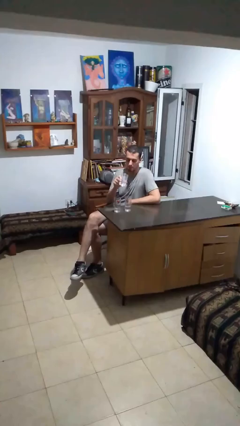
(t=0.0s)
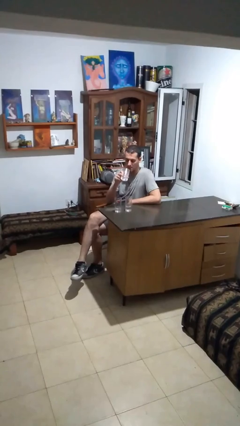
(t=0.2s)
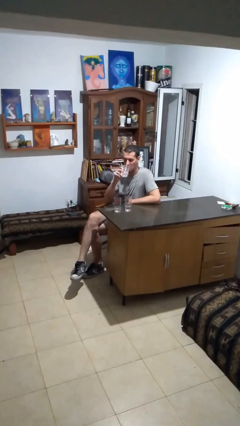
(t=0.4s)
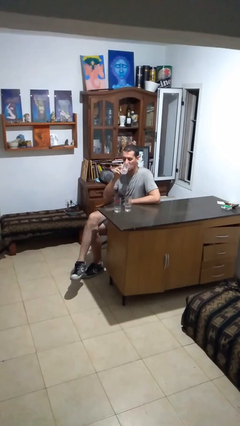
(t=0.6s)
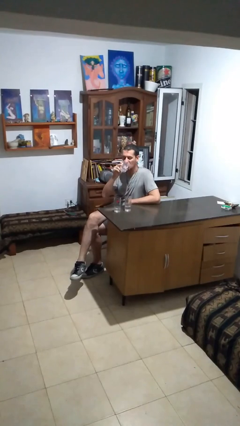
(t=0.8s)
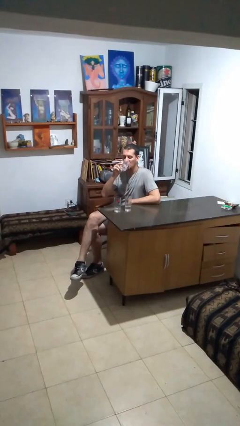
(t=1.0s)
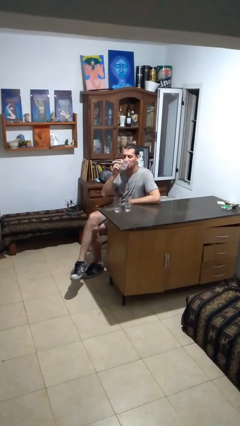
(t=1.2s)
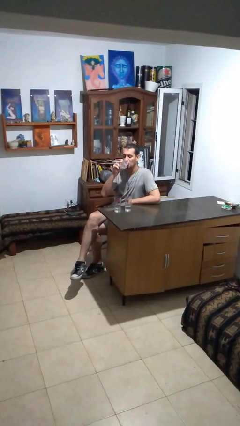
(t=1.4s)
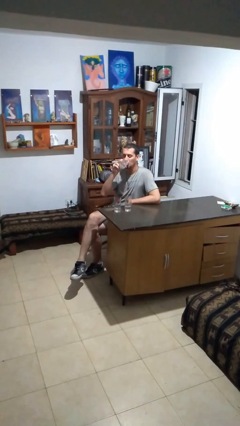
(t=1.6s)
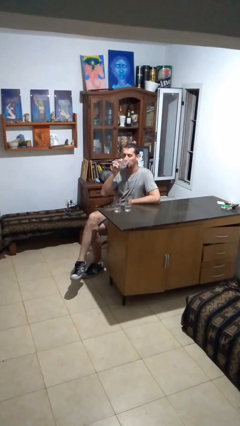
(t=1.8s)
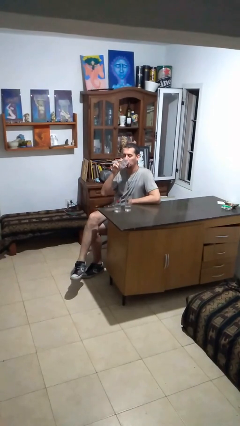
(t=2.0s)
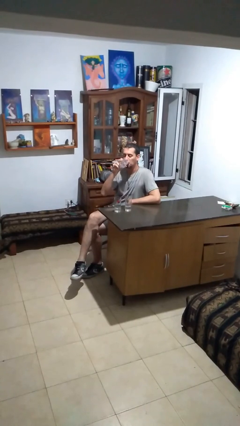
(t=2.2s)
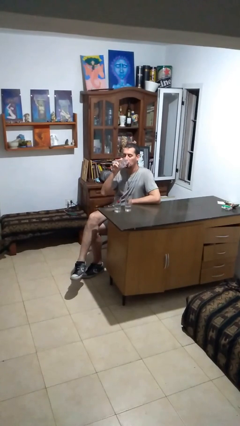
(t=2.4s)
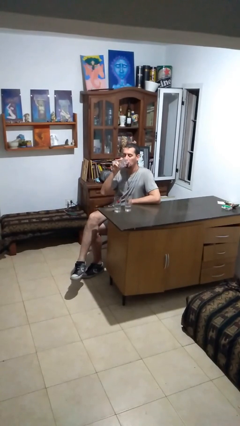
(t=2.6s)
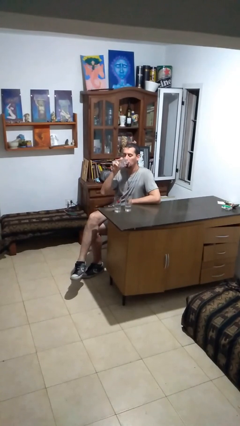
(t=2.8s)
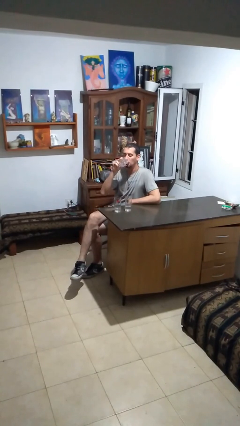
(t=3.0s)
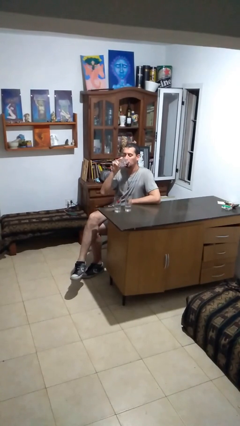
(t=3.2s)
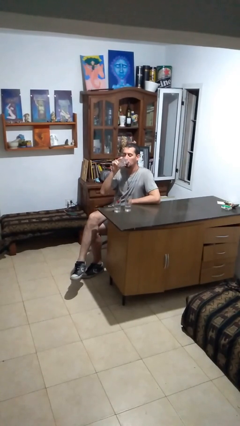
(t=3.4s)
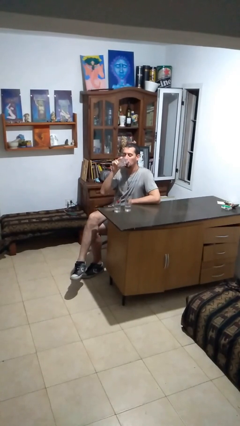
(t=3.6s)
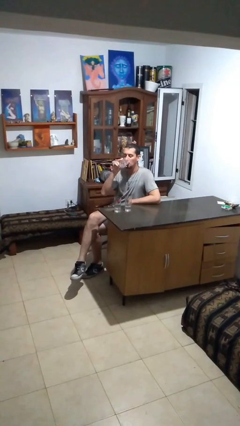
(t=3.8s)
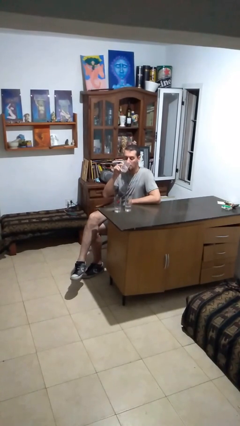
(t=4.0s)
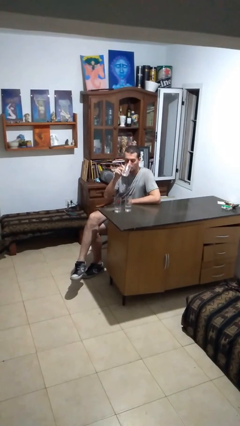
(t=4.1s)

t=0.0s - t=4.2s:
person drinks from shotglass

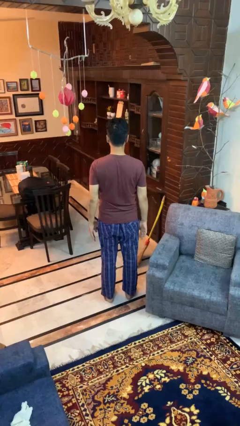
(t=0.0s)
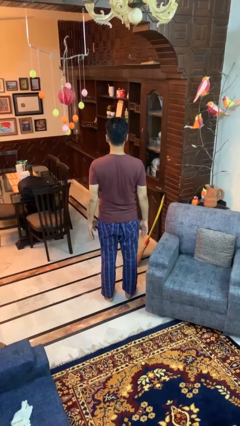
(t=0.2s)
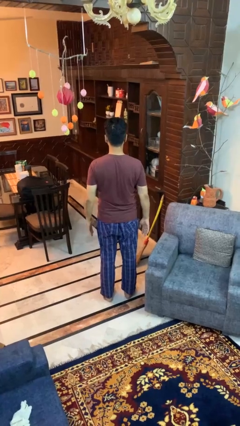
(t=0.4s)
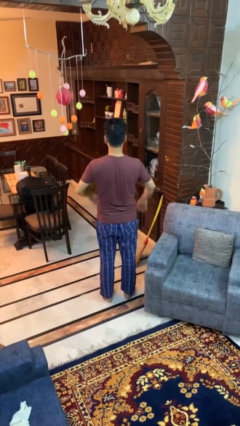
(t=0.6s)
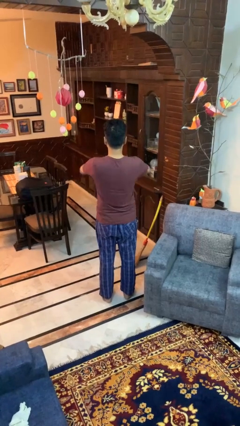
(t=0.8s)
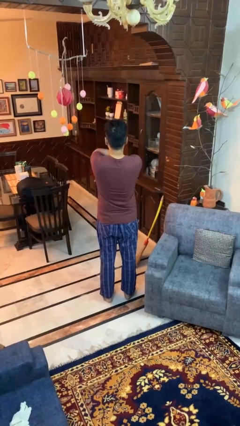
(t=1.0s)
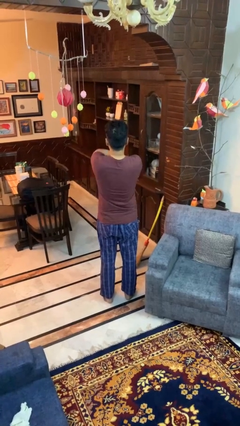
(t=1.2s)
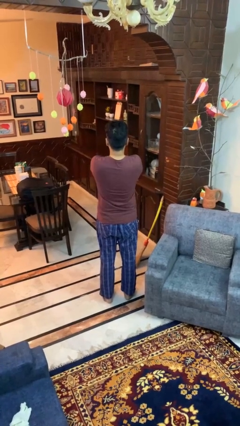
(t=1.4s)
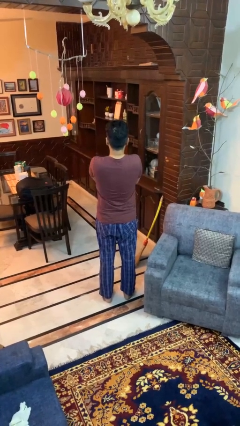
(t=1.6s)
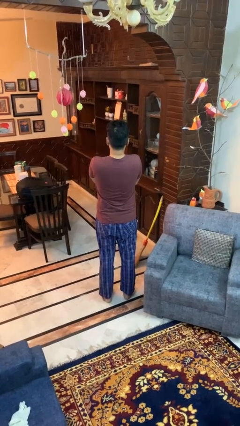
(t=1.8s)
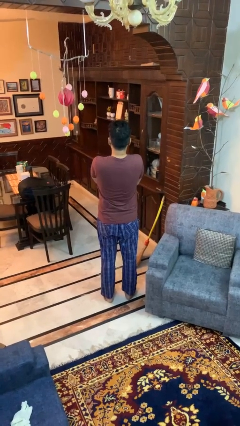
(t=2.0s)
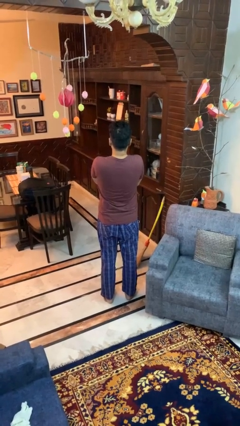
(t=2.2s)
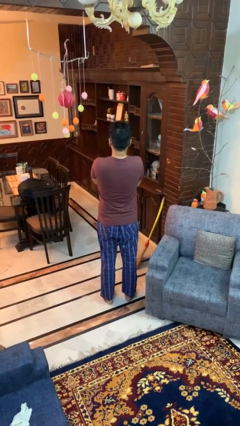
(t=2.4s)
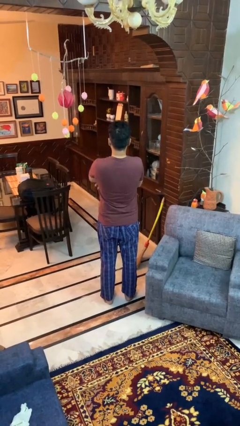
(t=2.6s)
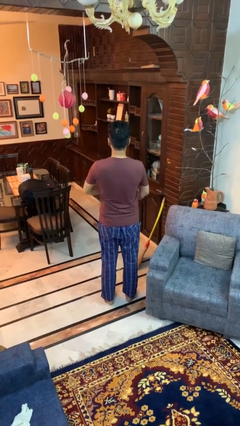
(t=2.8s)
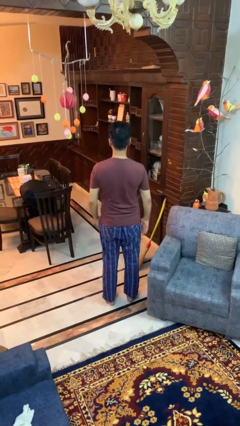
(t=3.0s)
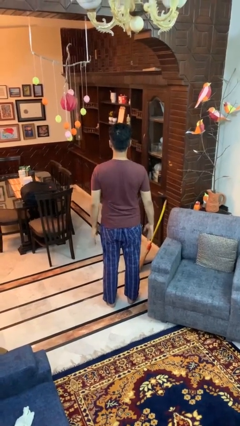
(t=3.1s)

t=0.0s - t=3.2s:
person crosses arms

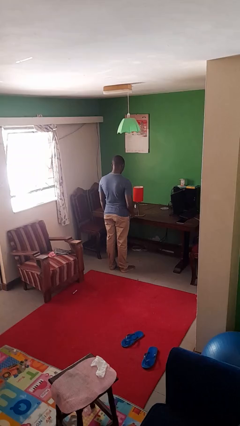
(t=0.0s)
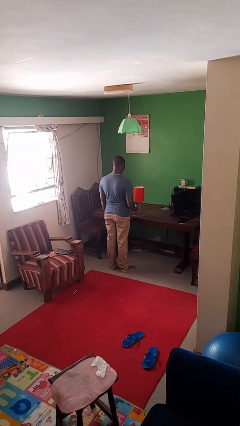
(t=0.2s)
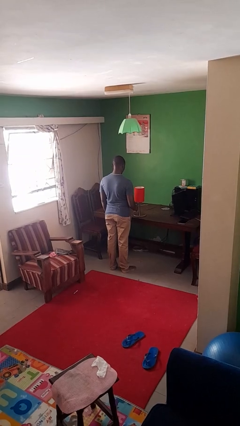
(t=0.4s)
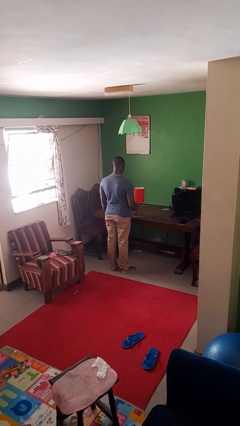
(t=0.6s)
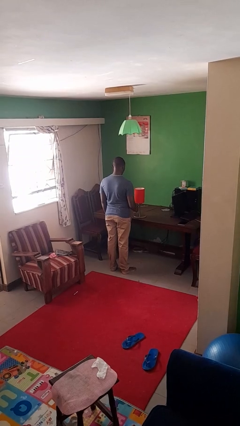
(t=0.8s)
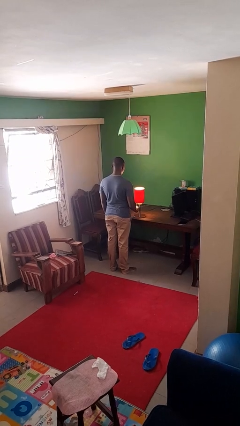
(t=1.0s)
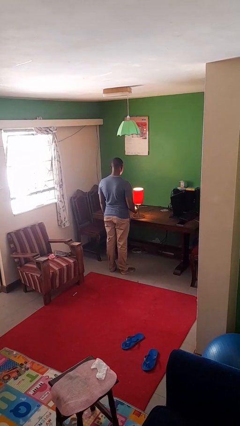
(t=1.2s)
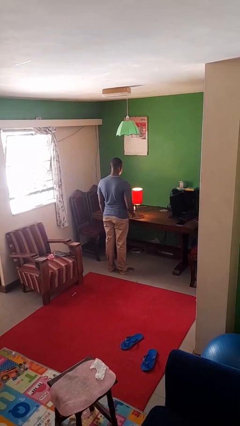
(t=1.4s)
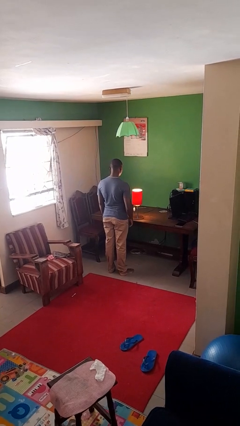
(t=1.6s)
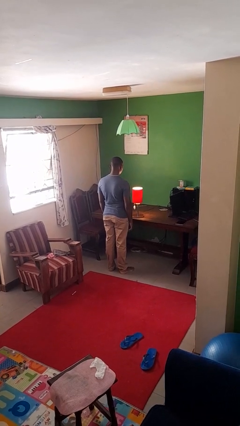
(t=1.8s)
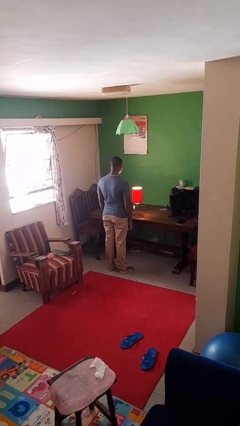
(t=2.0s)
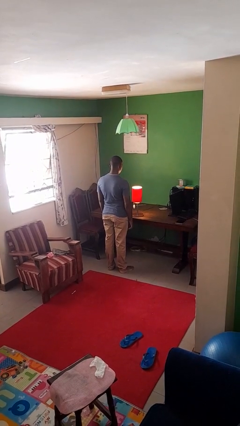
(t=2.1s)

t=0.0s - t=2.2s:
person turns on lamp

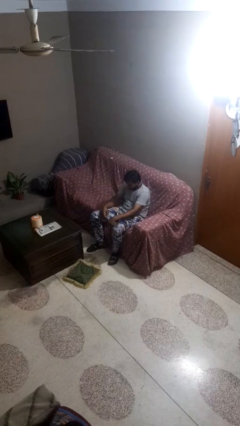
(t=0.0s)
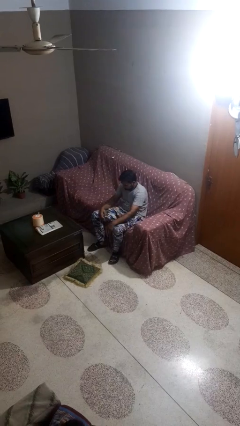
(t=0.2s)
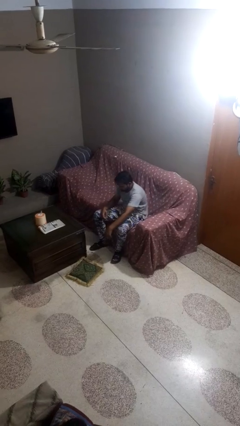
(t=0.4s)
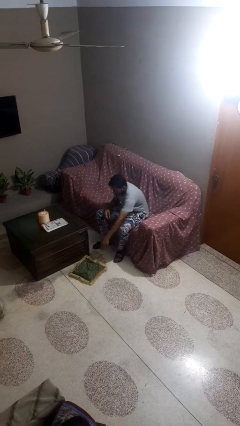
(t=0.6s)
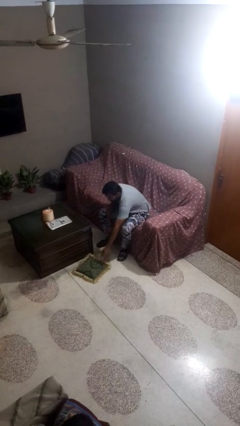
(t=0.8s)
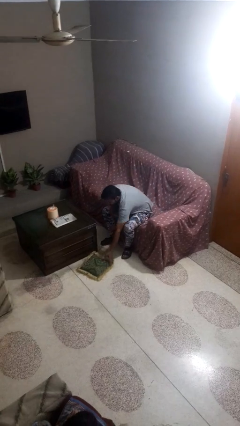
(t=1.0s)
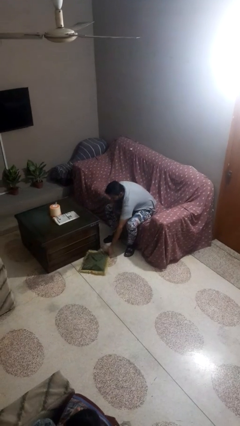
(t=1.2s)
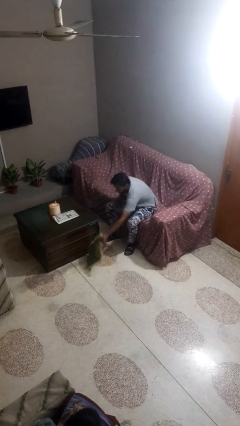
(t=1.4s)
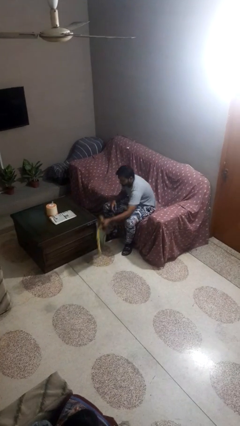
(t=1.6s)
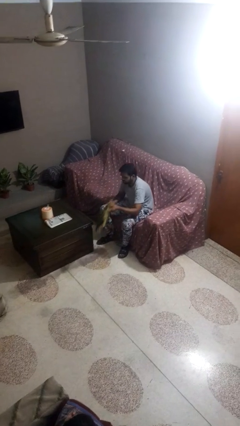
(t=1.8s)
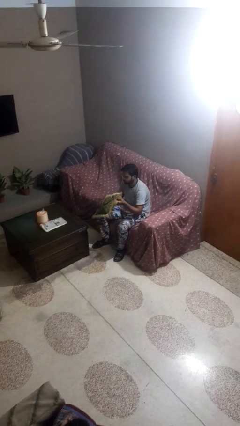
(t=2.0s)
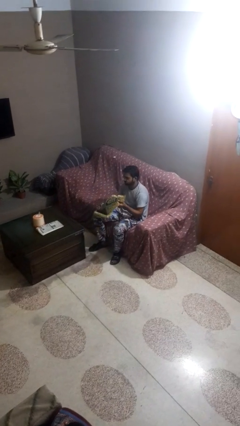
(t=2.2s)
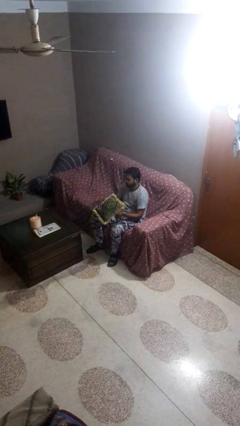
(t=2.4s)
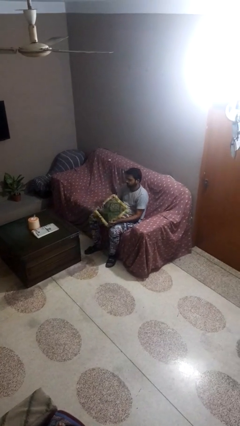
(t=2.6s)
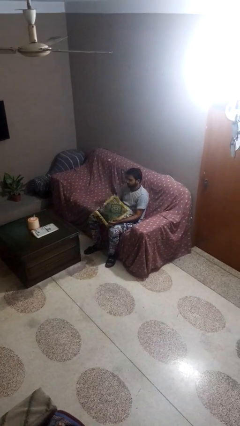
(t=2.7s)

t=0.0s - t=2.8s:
person picks up object from floor

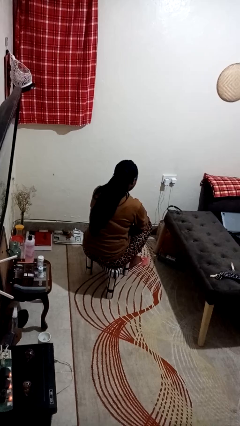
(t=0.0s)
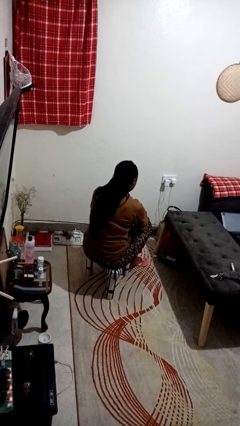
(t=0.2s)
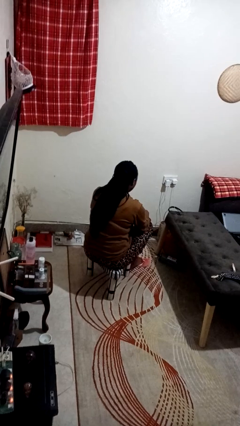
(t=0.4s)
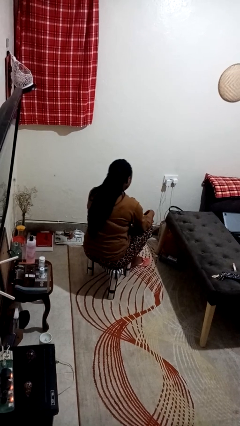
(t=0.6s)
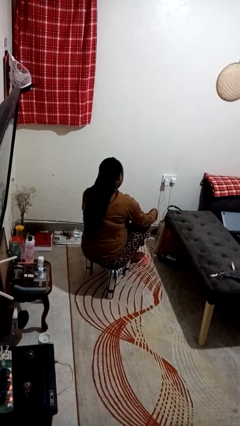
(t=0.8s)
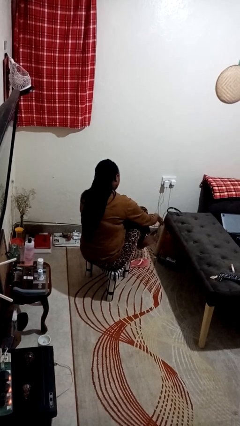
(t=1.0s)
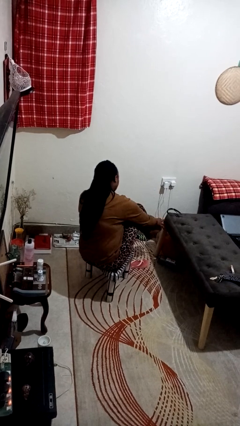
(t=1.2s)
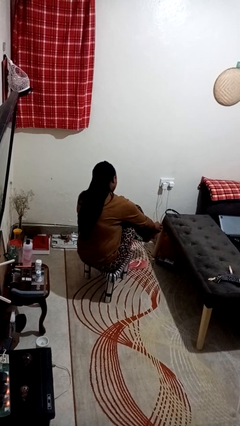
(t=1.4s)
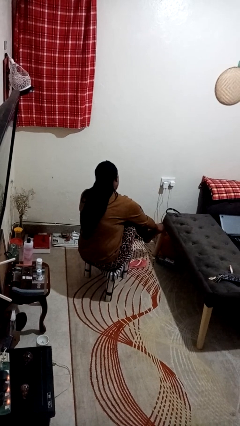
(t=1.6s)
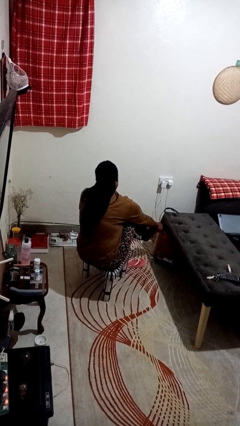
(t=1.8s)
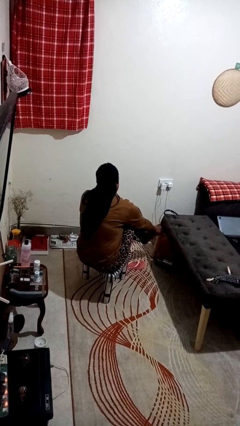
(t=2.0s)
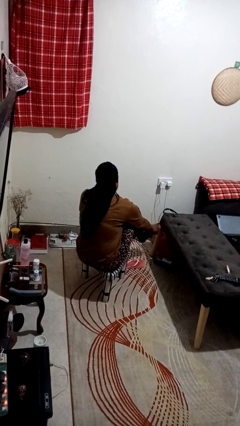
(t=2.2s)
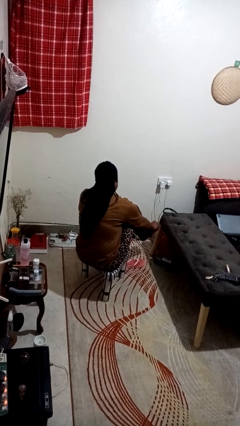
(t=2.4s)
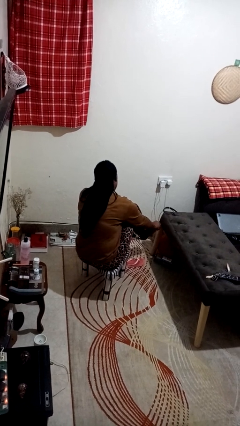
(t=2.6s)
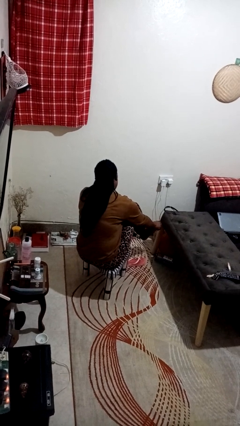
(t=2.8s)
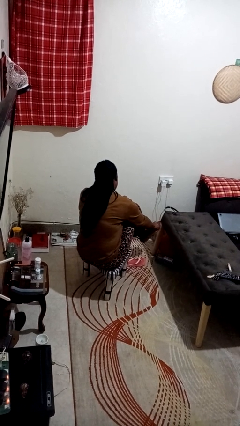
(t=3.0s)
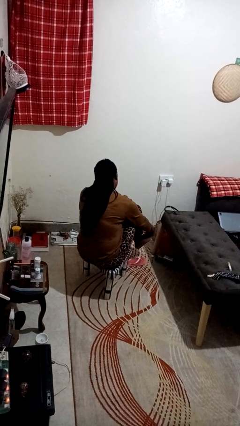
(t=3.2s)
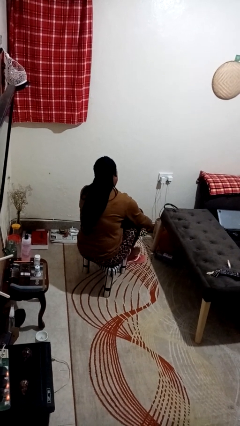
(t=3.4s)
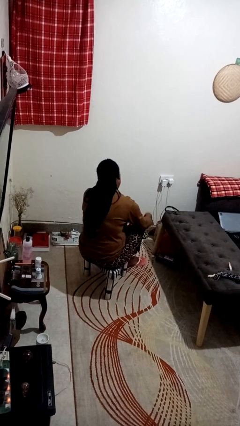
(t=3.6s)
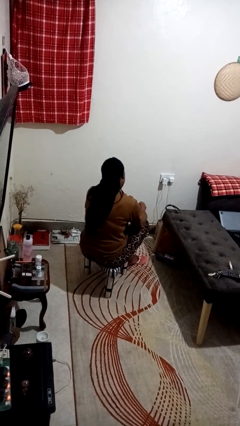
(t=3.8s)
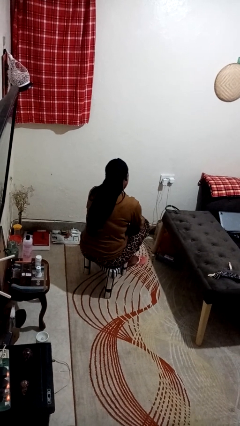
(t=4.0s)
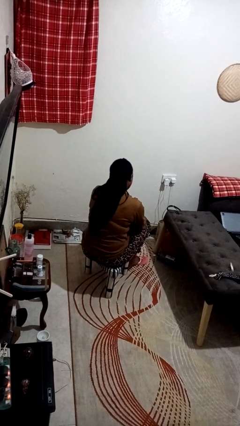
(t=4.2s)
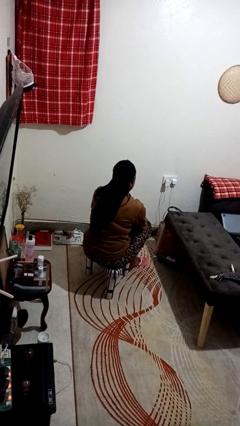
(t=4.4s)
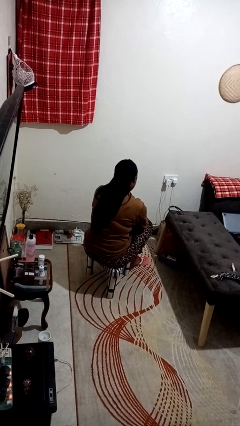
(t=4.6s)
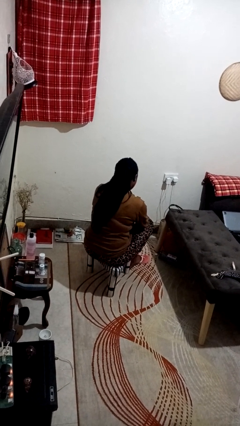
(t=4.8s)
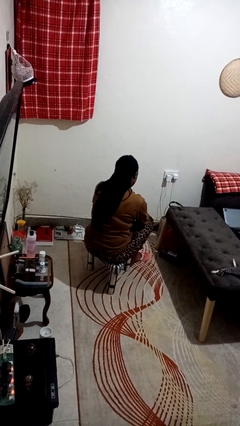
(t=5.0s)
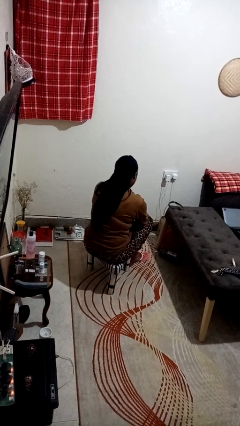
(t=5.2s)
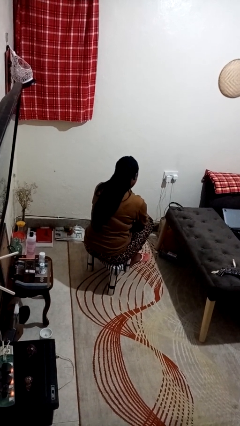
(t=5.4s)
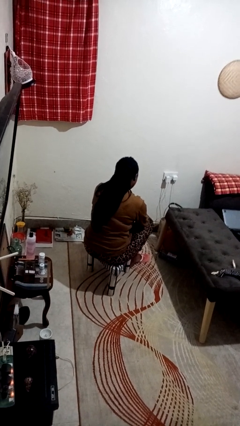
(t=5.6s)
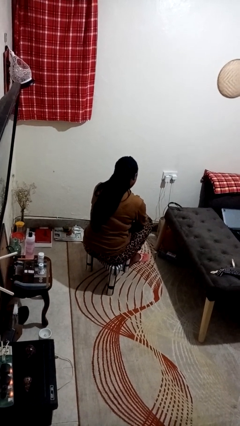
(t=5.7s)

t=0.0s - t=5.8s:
person rubs foot
